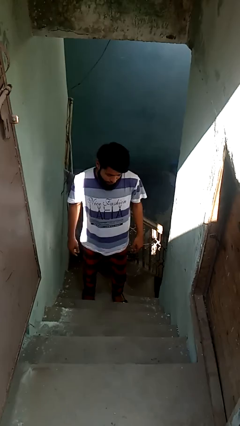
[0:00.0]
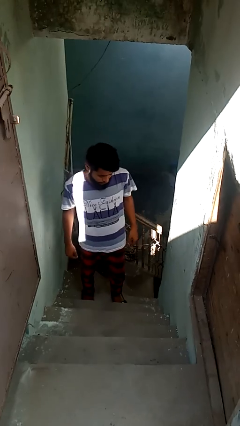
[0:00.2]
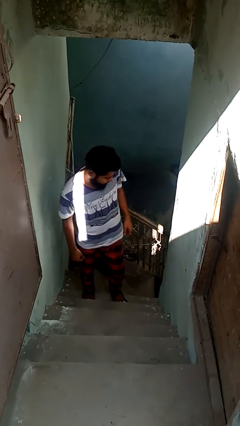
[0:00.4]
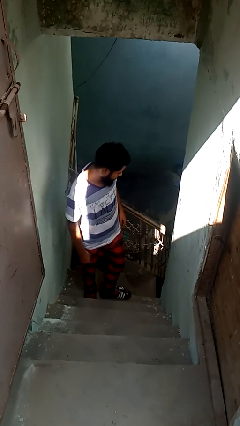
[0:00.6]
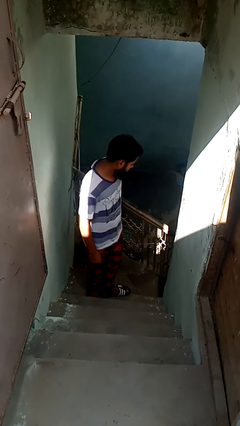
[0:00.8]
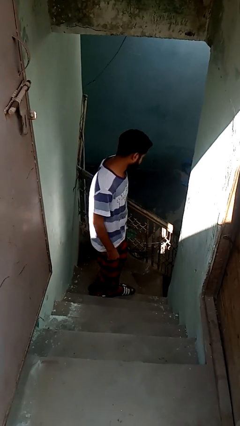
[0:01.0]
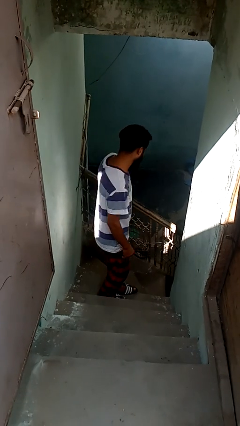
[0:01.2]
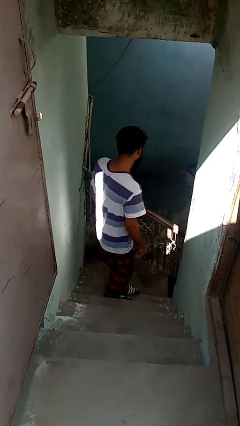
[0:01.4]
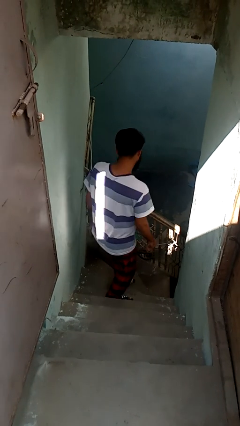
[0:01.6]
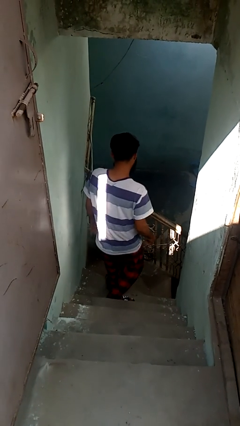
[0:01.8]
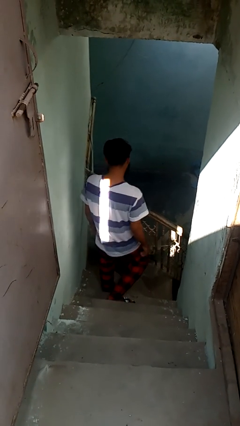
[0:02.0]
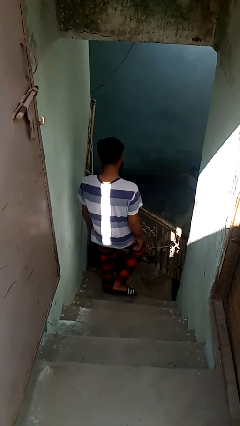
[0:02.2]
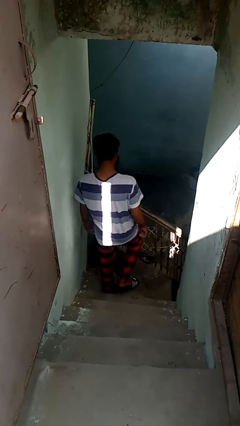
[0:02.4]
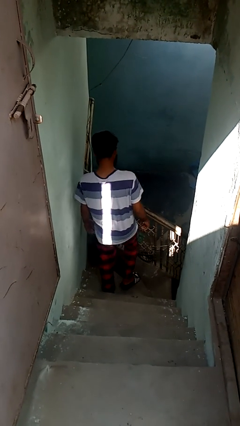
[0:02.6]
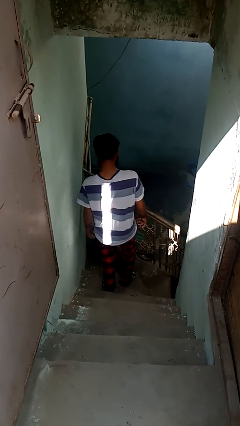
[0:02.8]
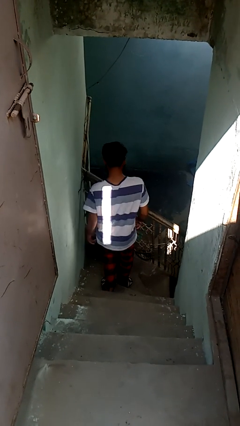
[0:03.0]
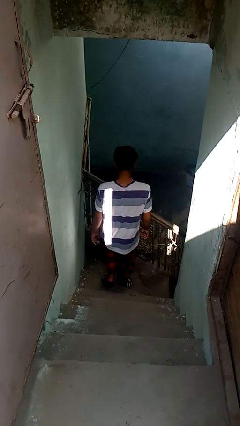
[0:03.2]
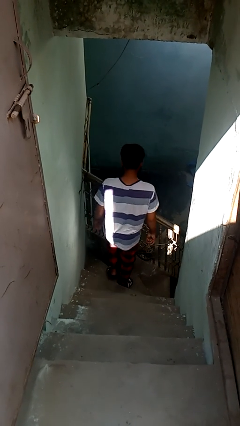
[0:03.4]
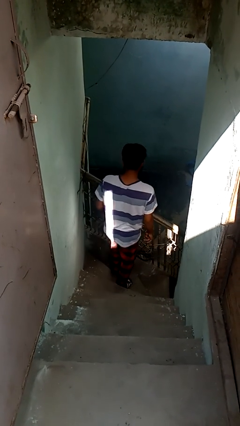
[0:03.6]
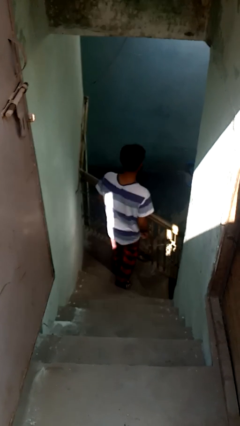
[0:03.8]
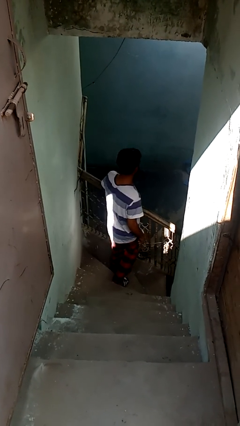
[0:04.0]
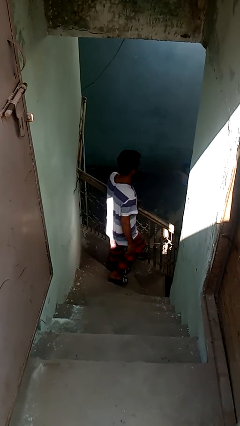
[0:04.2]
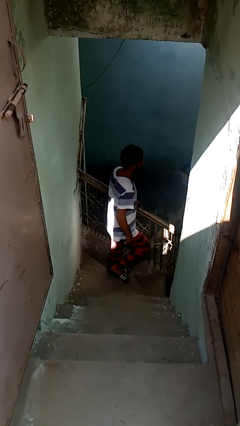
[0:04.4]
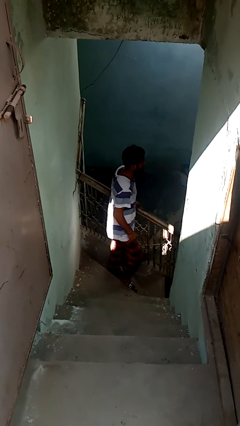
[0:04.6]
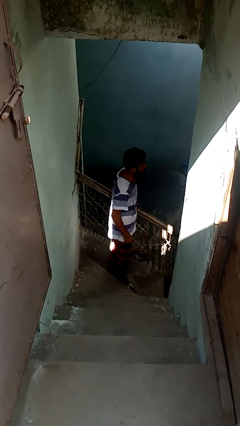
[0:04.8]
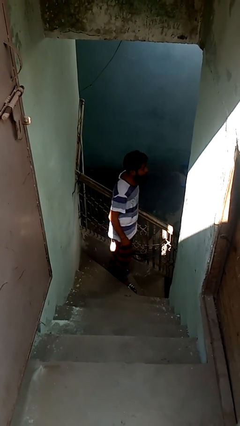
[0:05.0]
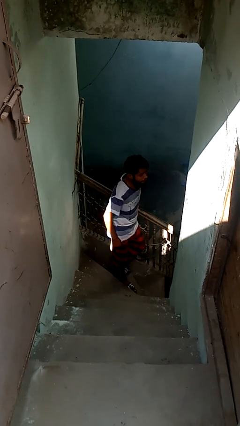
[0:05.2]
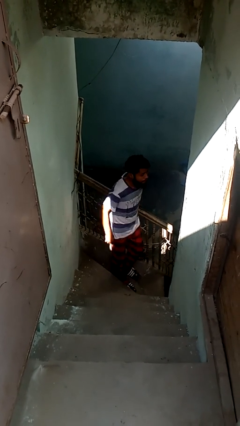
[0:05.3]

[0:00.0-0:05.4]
person climbs down stairs

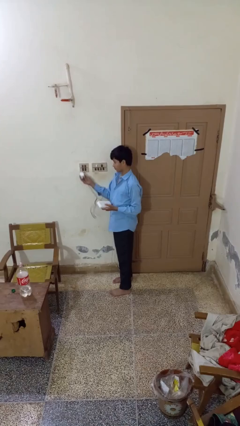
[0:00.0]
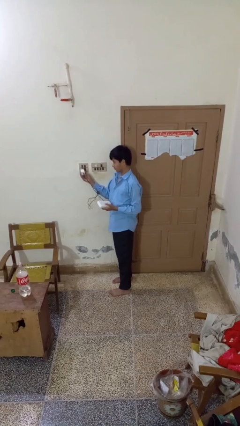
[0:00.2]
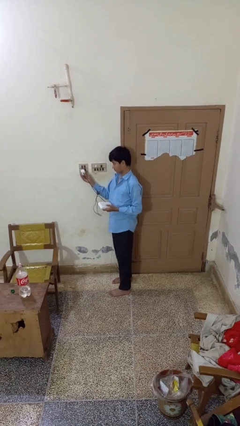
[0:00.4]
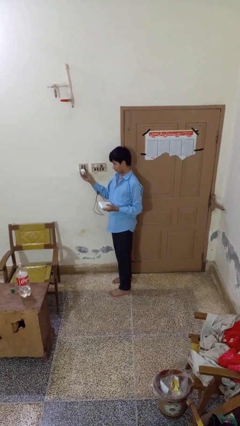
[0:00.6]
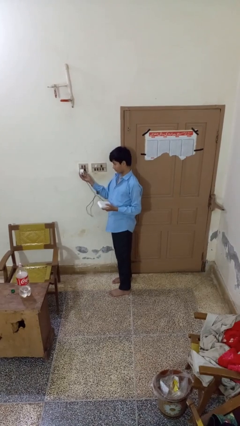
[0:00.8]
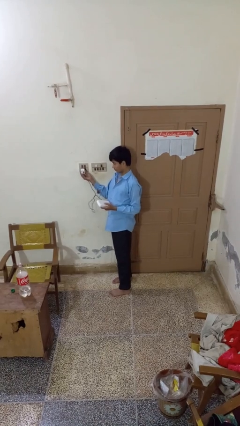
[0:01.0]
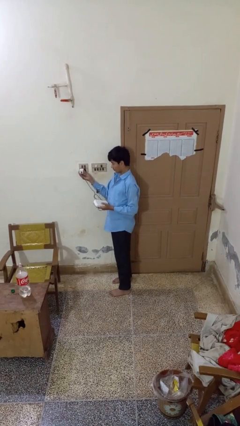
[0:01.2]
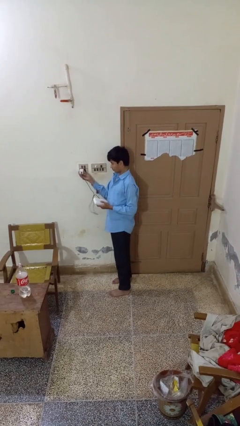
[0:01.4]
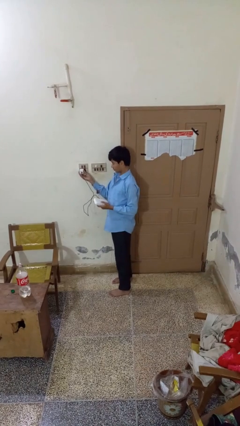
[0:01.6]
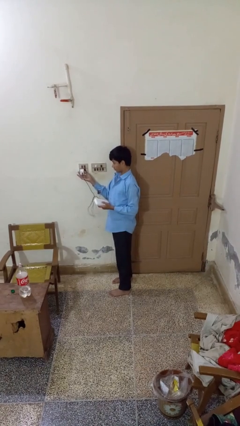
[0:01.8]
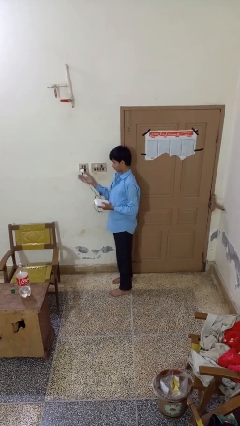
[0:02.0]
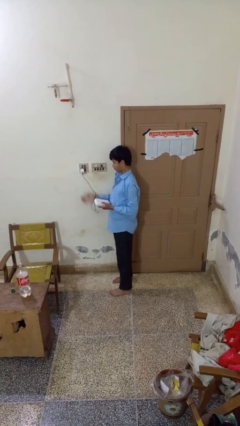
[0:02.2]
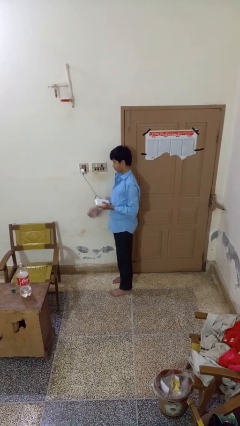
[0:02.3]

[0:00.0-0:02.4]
person plugs into electrical socket

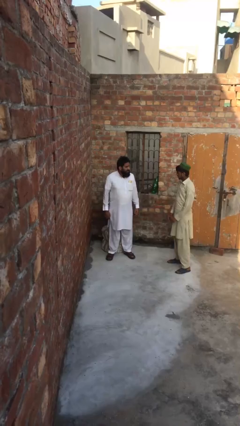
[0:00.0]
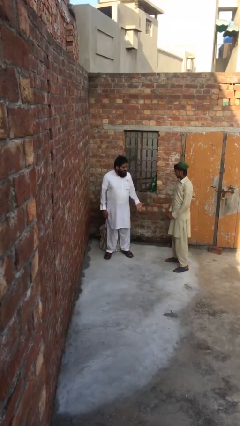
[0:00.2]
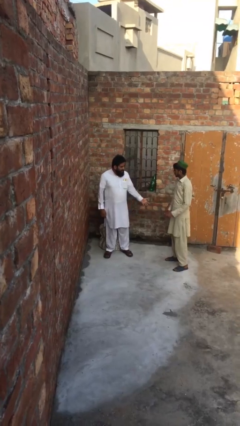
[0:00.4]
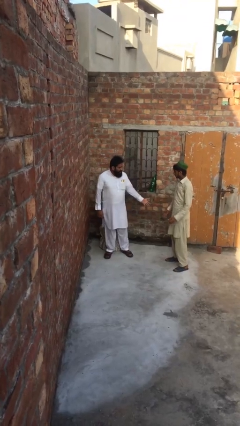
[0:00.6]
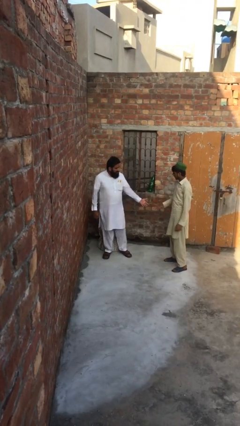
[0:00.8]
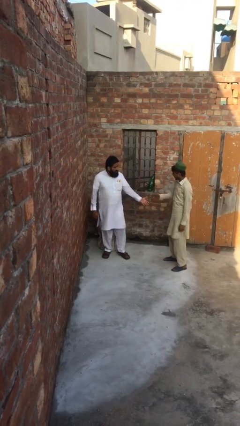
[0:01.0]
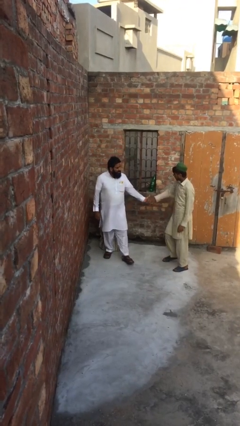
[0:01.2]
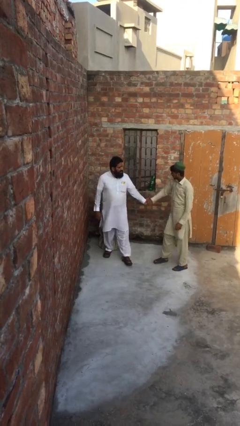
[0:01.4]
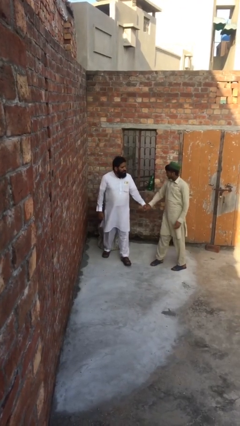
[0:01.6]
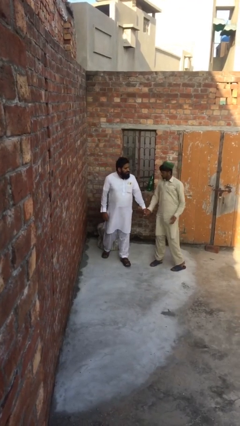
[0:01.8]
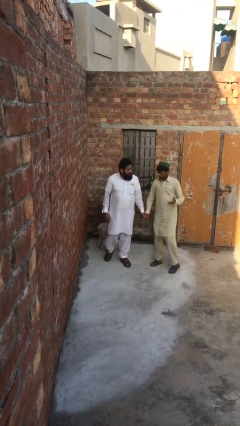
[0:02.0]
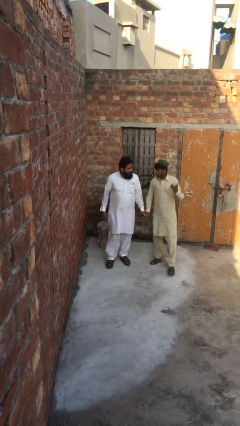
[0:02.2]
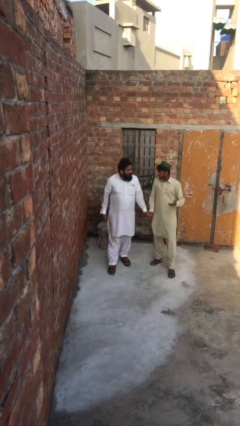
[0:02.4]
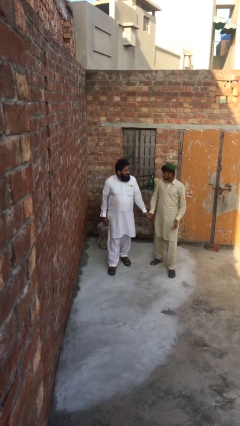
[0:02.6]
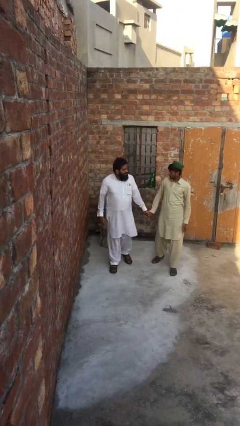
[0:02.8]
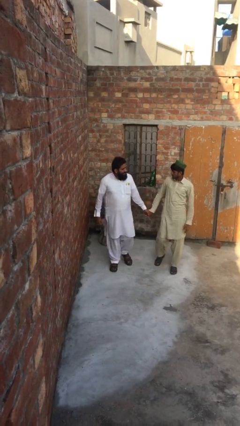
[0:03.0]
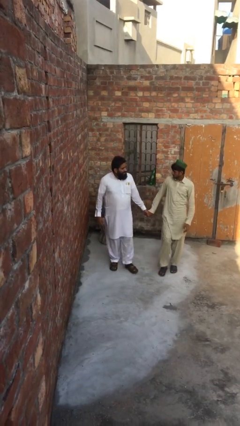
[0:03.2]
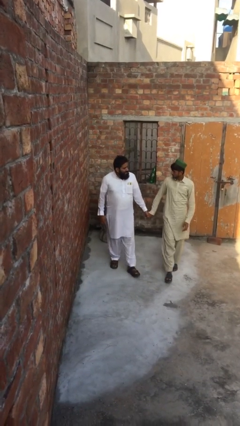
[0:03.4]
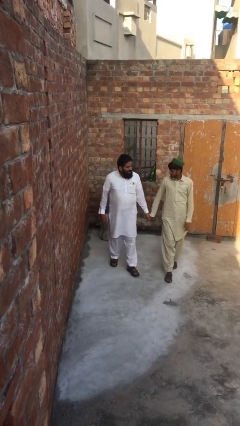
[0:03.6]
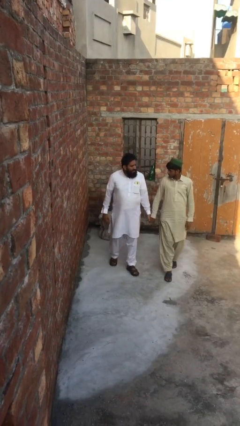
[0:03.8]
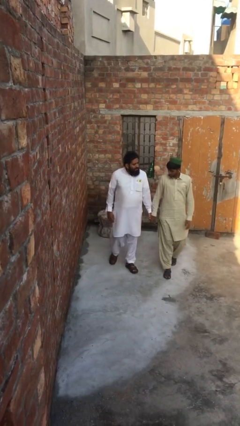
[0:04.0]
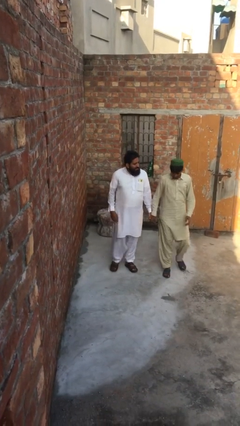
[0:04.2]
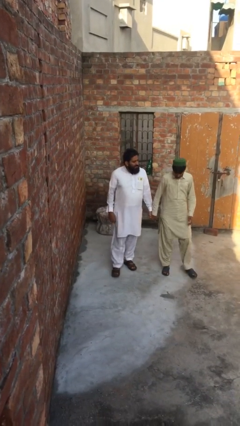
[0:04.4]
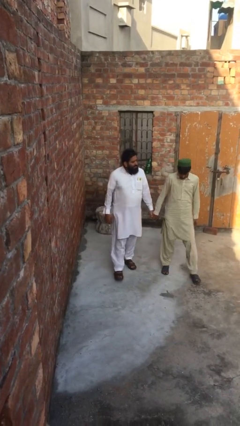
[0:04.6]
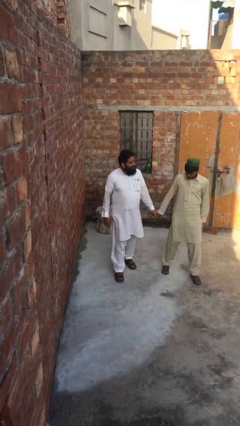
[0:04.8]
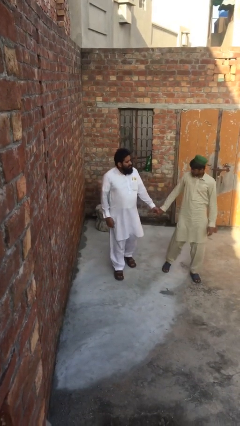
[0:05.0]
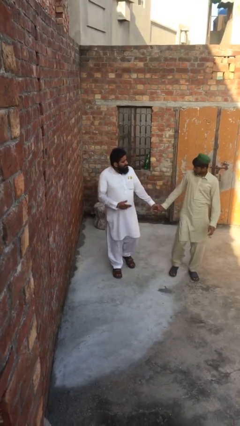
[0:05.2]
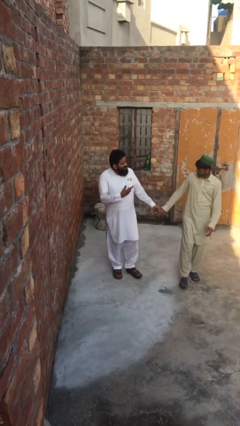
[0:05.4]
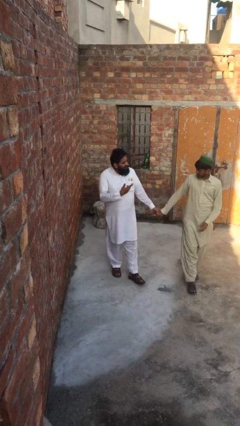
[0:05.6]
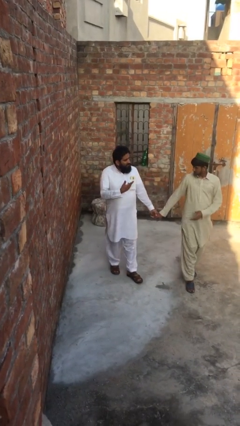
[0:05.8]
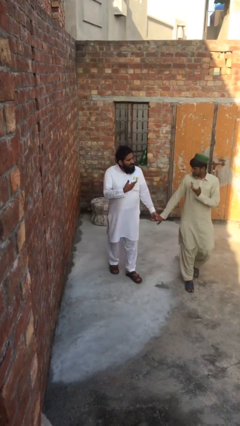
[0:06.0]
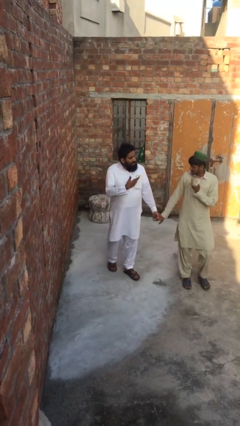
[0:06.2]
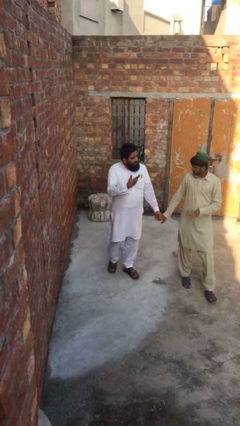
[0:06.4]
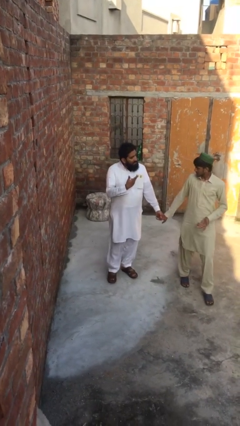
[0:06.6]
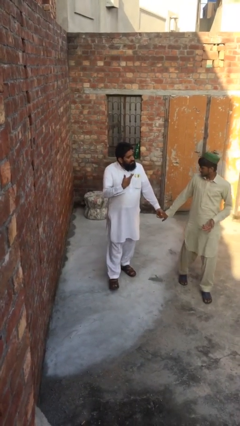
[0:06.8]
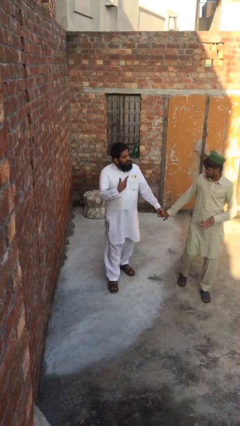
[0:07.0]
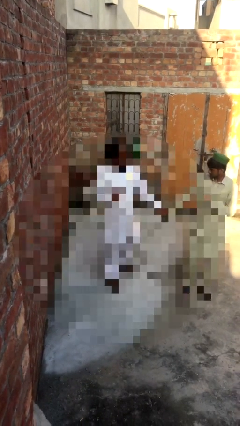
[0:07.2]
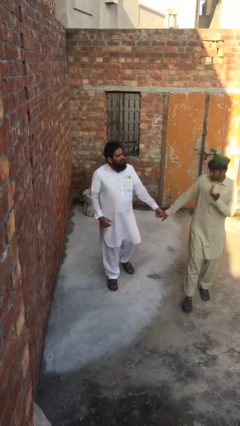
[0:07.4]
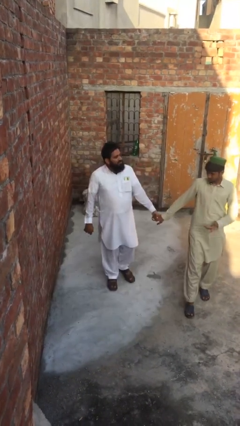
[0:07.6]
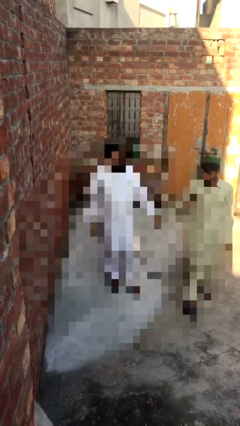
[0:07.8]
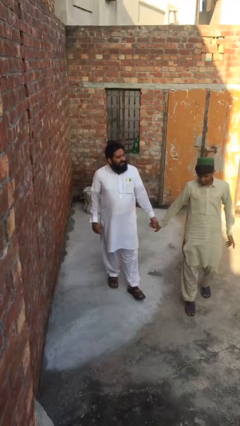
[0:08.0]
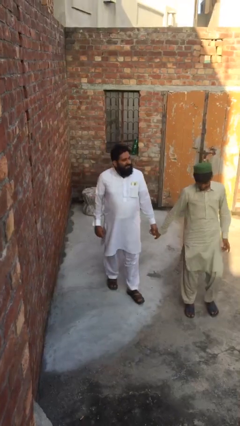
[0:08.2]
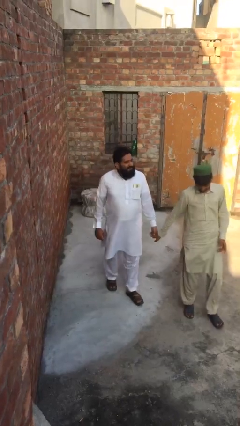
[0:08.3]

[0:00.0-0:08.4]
person holds hand

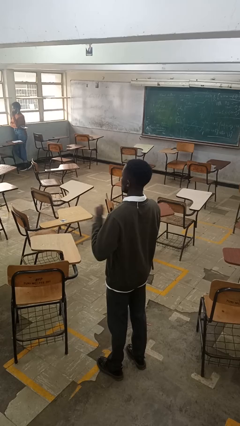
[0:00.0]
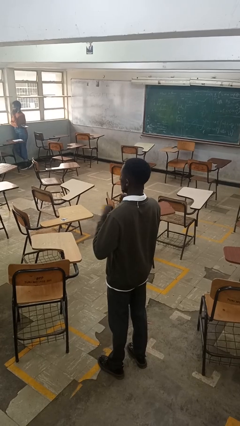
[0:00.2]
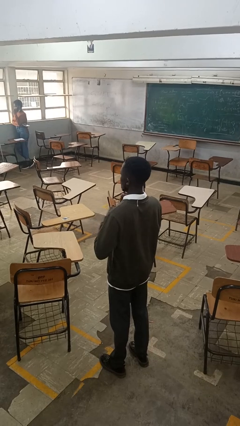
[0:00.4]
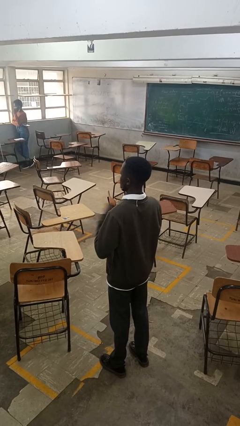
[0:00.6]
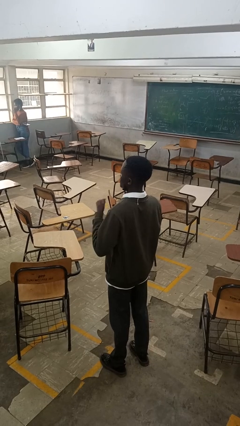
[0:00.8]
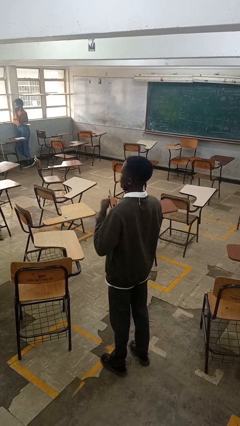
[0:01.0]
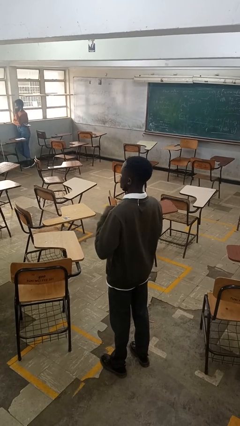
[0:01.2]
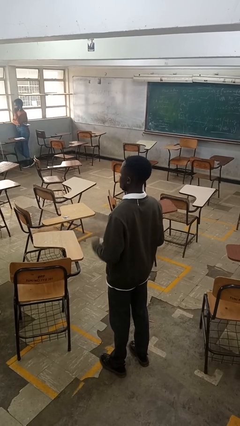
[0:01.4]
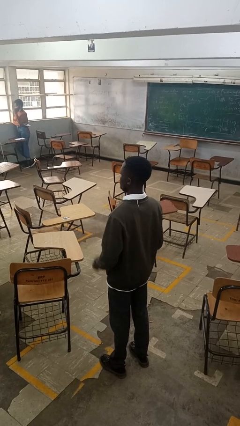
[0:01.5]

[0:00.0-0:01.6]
person drums on chest
